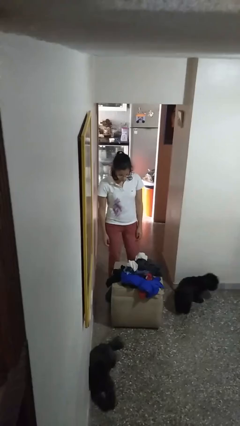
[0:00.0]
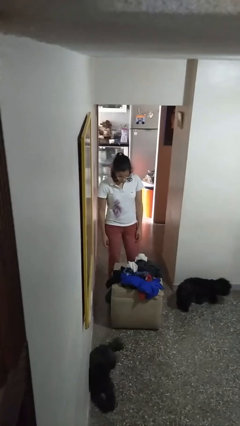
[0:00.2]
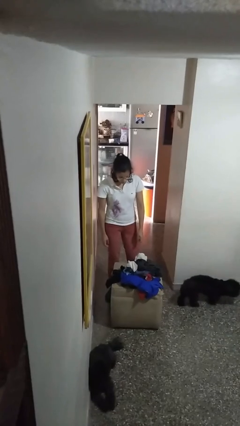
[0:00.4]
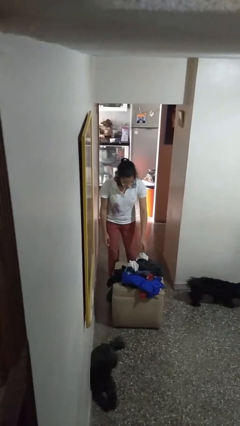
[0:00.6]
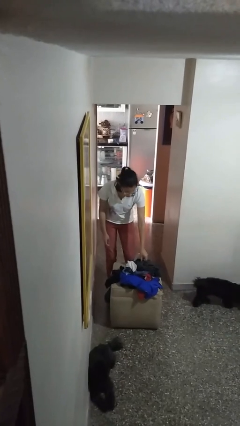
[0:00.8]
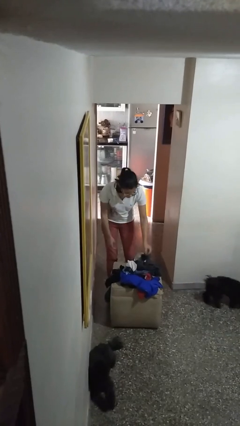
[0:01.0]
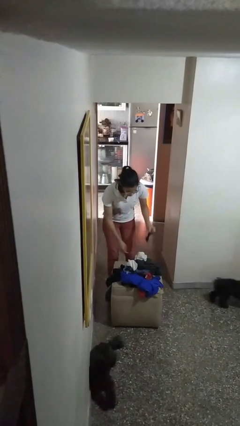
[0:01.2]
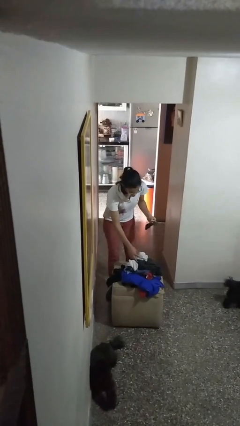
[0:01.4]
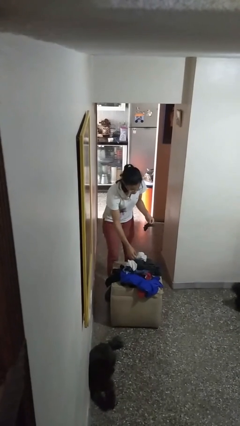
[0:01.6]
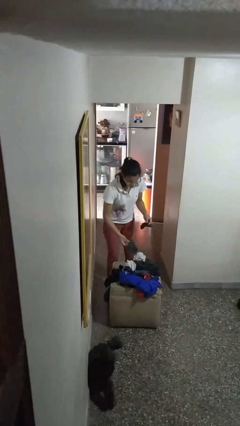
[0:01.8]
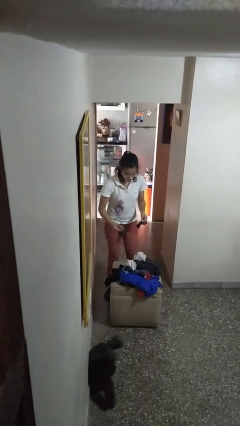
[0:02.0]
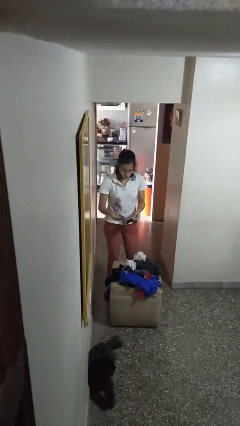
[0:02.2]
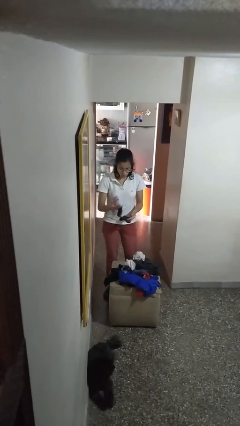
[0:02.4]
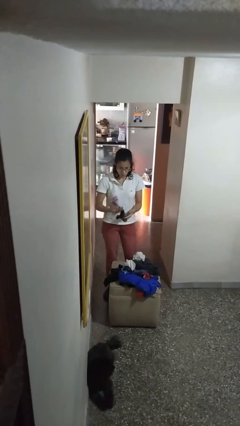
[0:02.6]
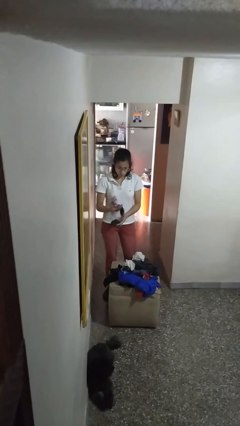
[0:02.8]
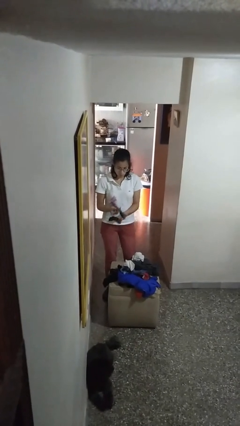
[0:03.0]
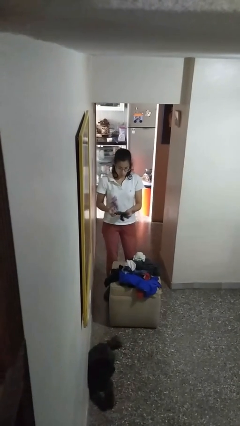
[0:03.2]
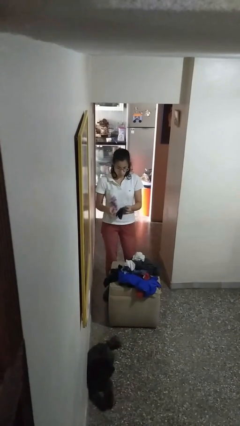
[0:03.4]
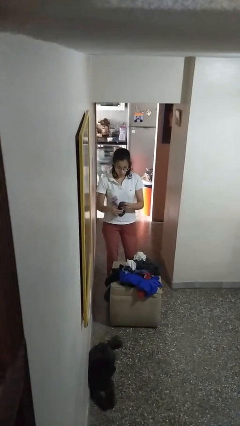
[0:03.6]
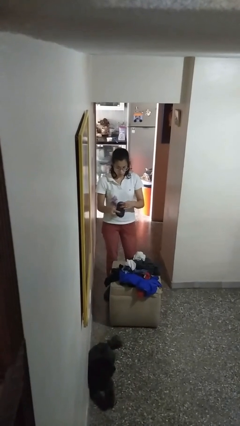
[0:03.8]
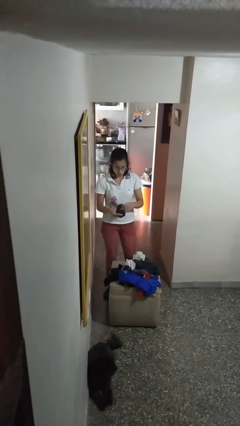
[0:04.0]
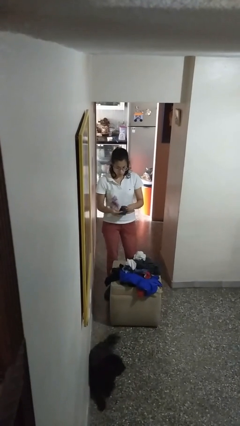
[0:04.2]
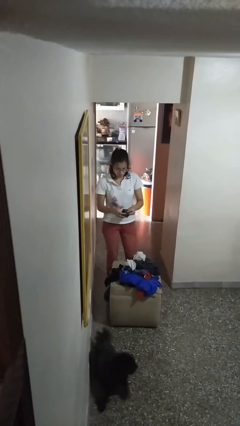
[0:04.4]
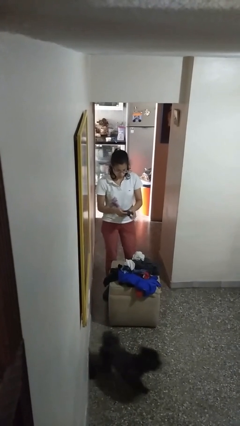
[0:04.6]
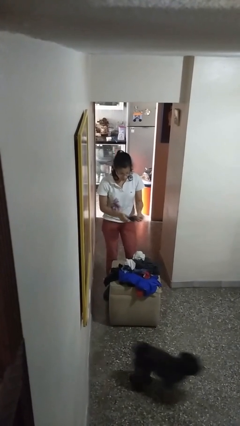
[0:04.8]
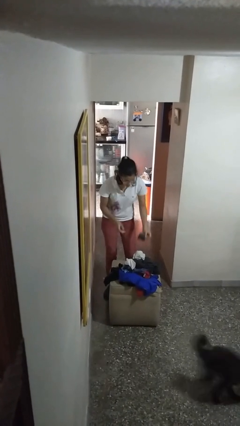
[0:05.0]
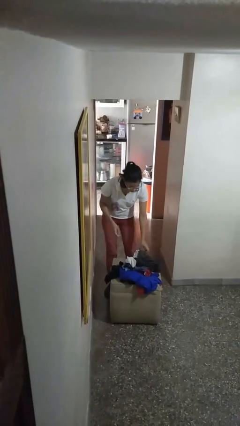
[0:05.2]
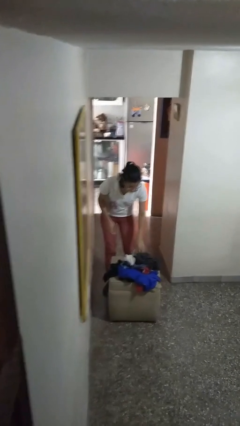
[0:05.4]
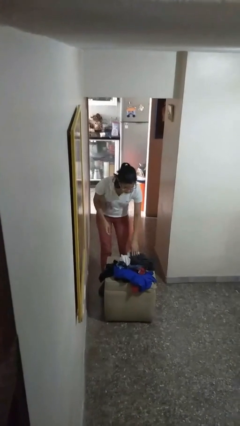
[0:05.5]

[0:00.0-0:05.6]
person folds socks

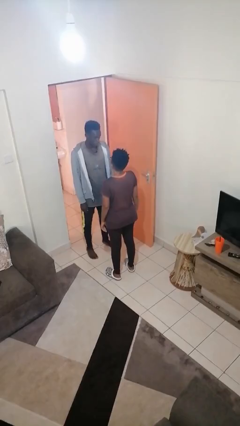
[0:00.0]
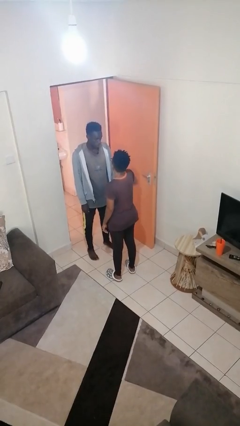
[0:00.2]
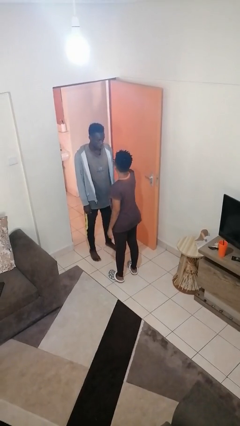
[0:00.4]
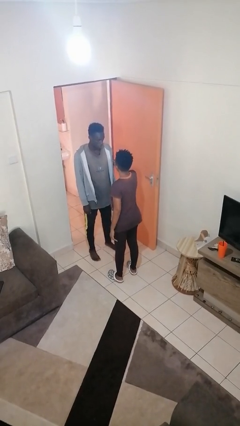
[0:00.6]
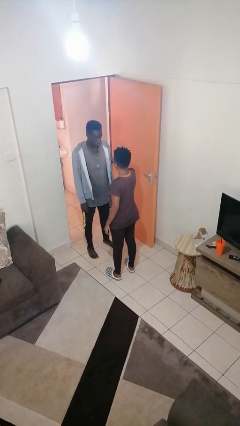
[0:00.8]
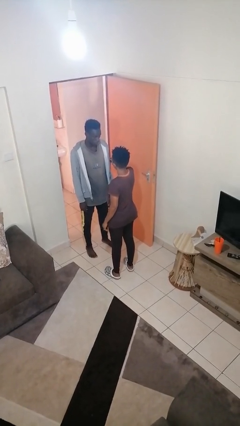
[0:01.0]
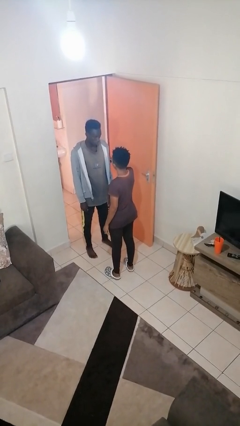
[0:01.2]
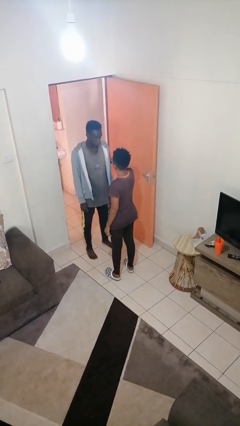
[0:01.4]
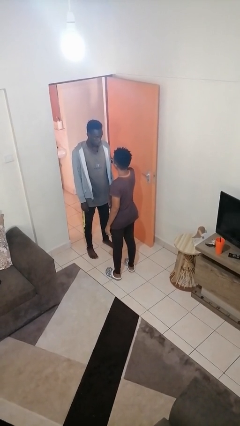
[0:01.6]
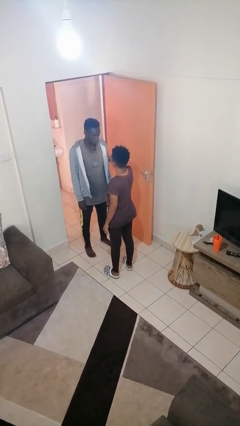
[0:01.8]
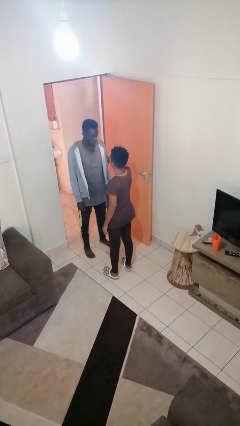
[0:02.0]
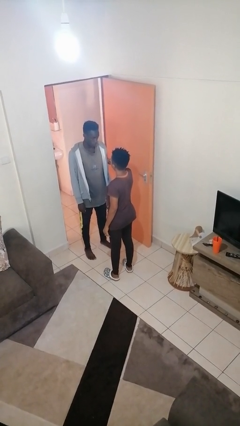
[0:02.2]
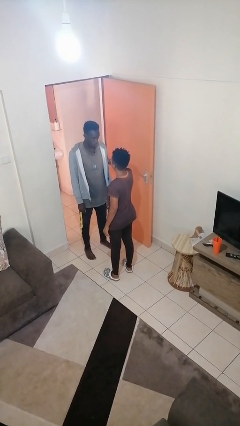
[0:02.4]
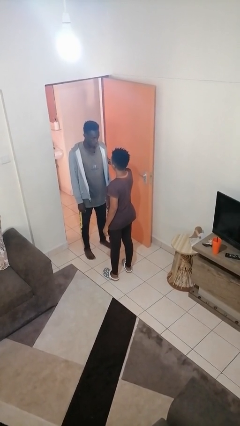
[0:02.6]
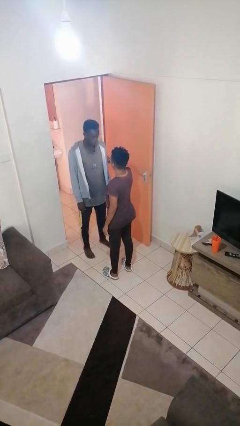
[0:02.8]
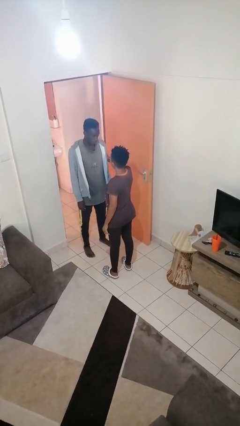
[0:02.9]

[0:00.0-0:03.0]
person grabs person by bicep

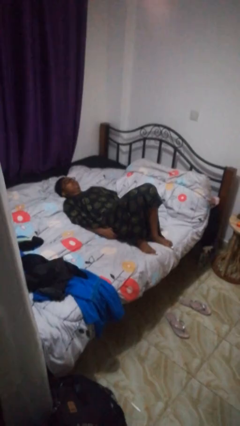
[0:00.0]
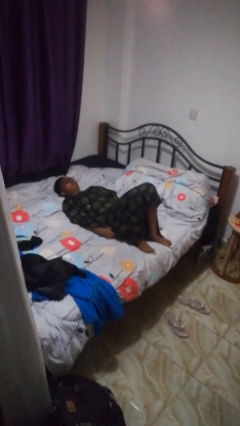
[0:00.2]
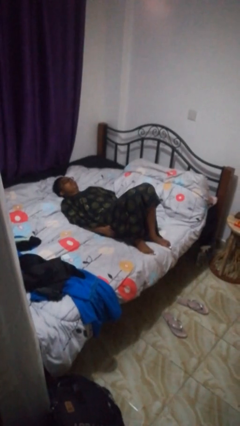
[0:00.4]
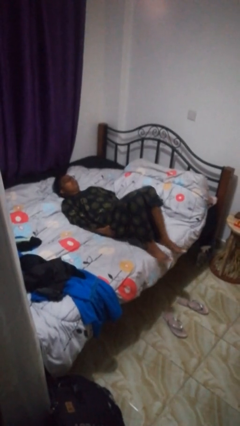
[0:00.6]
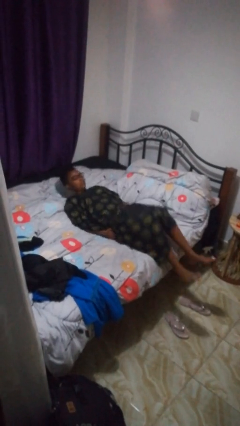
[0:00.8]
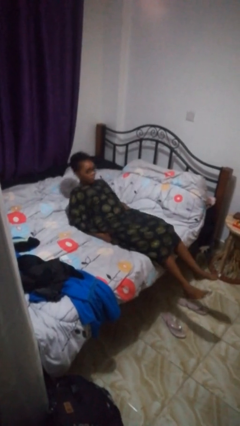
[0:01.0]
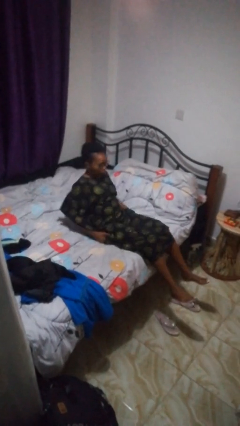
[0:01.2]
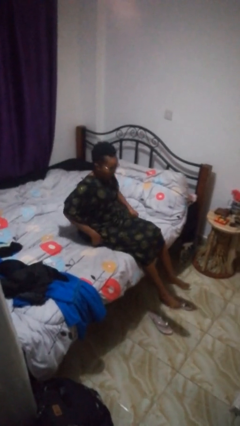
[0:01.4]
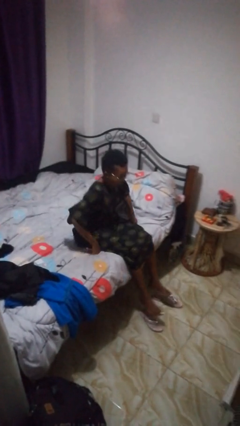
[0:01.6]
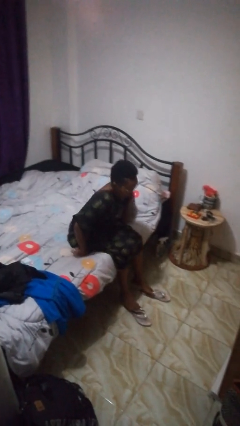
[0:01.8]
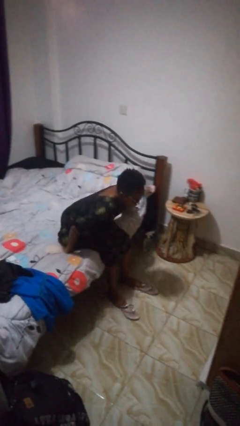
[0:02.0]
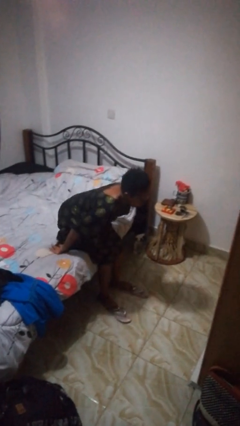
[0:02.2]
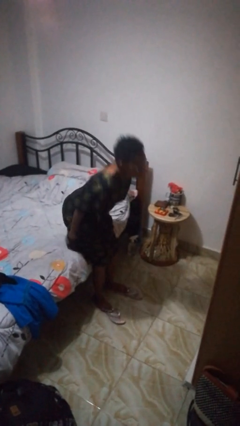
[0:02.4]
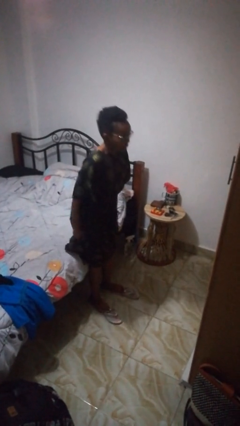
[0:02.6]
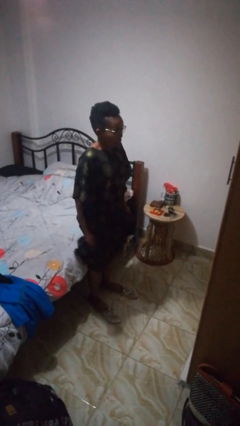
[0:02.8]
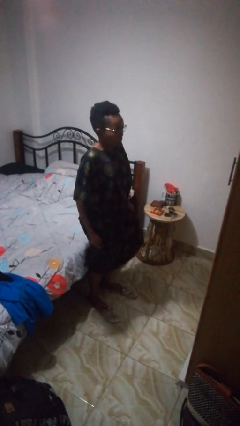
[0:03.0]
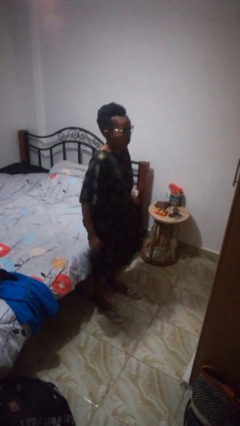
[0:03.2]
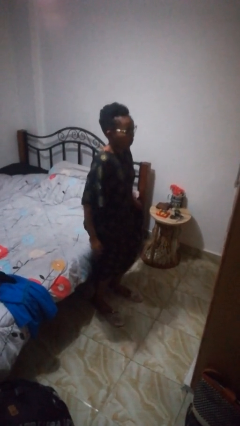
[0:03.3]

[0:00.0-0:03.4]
person stands up

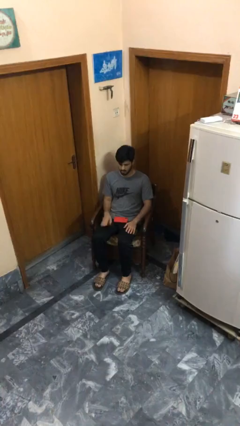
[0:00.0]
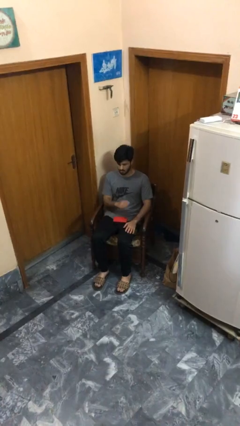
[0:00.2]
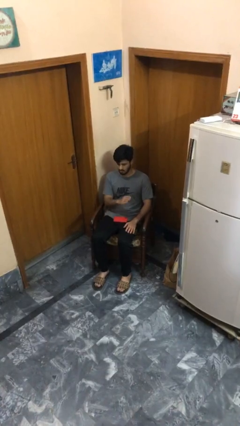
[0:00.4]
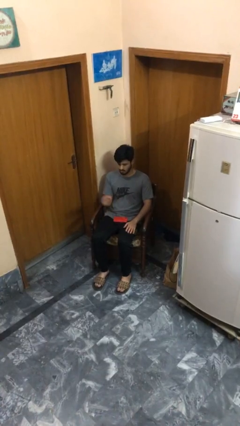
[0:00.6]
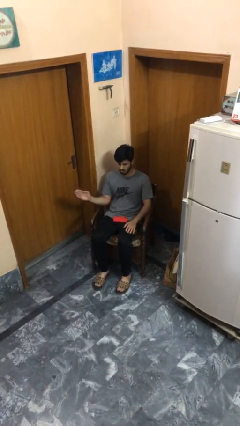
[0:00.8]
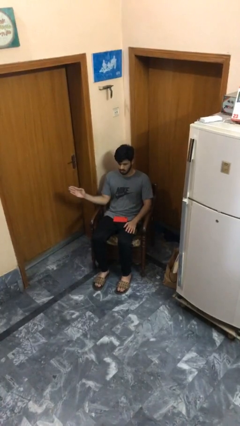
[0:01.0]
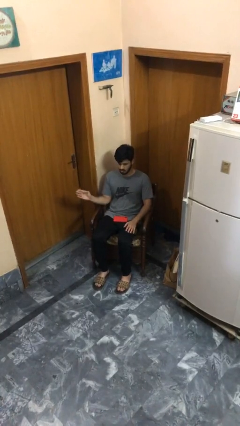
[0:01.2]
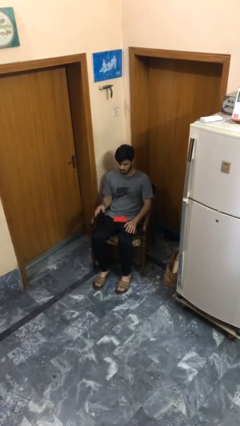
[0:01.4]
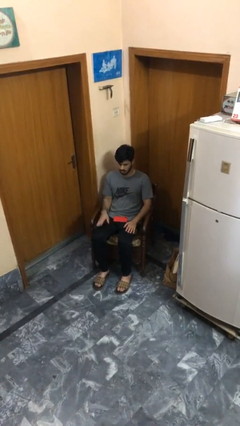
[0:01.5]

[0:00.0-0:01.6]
person gestures swipe right

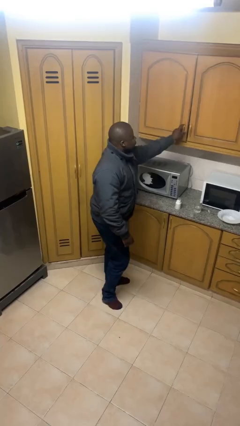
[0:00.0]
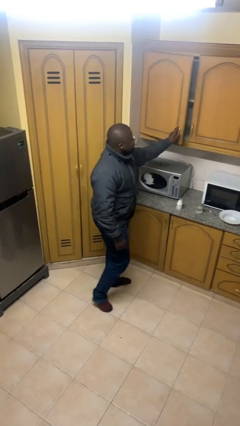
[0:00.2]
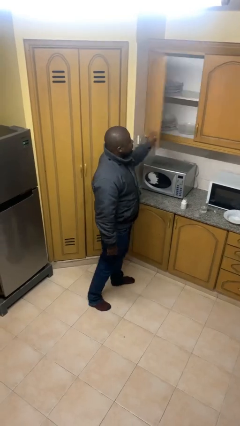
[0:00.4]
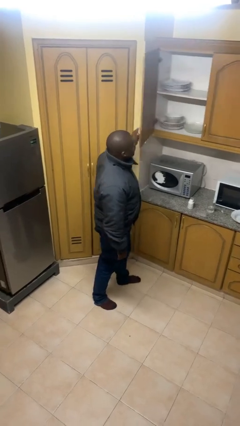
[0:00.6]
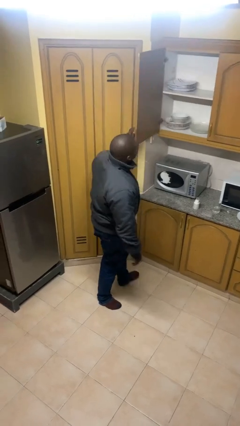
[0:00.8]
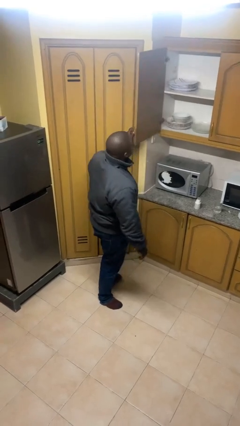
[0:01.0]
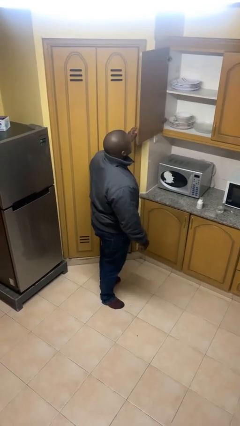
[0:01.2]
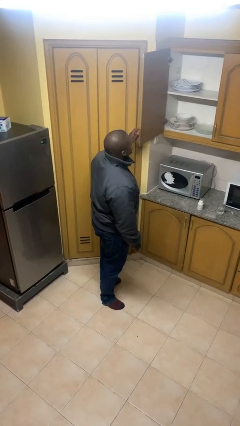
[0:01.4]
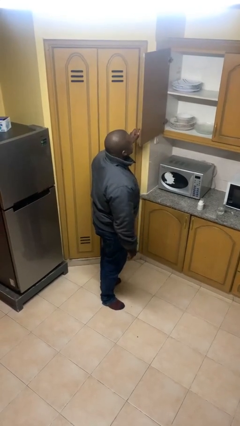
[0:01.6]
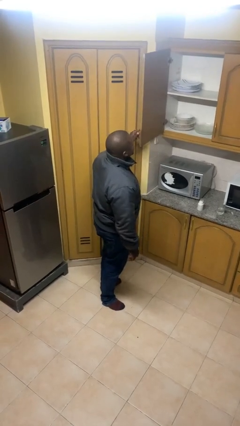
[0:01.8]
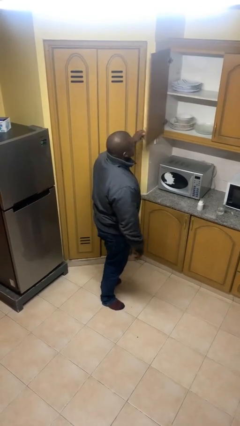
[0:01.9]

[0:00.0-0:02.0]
person closes cabinet

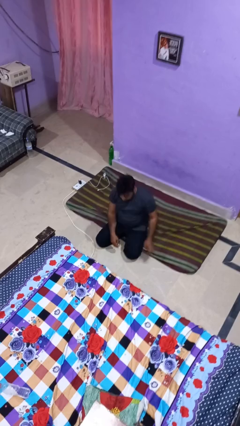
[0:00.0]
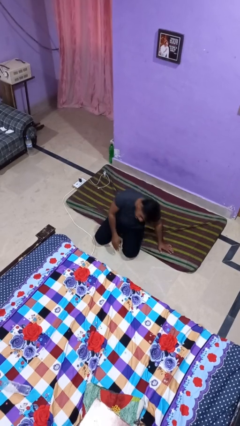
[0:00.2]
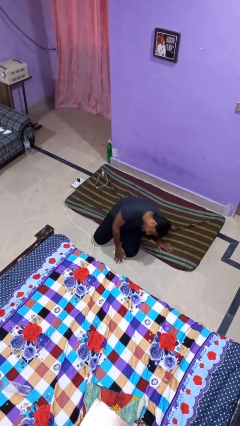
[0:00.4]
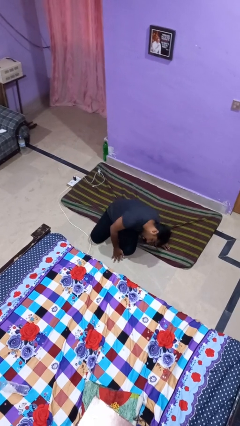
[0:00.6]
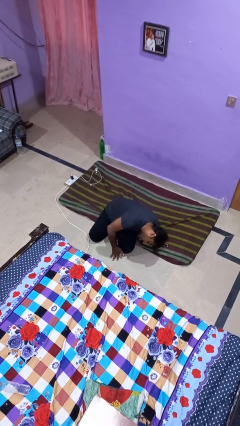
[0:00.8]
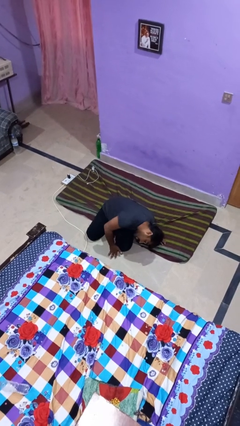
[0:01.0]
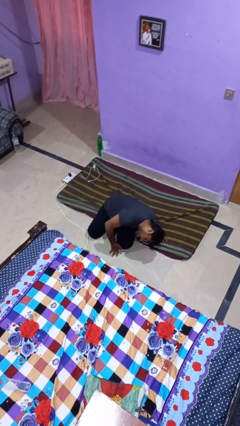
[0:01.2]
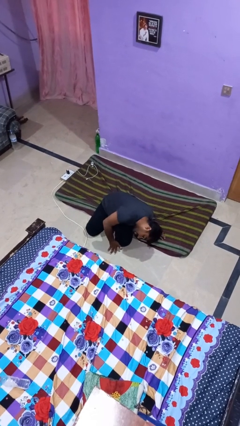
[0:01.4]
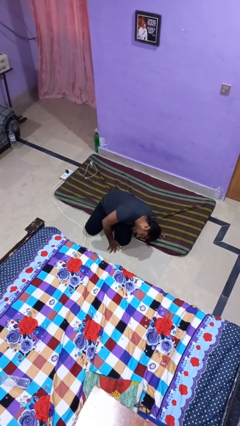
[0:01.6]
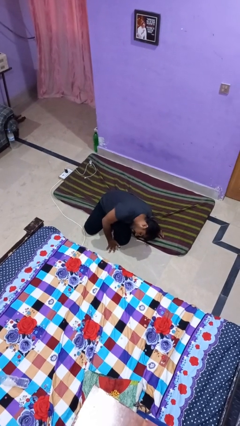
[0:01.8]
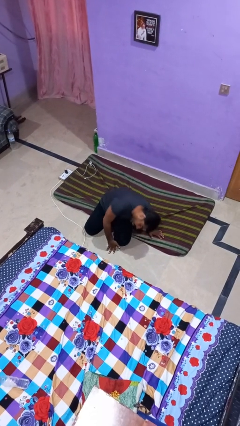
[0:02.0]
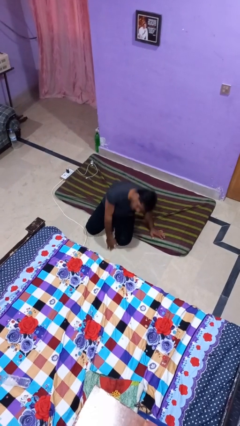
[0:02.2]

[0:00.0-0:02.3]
person searches under bed
